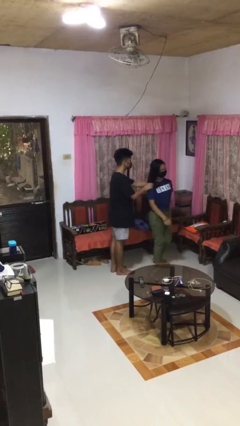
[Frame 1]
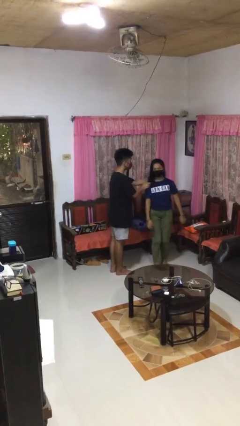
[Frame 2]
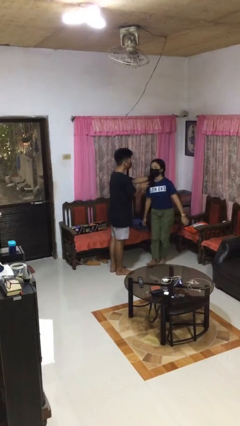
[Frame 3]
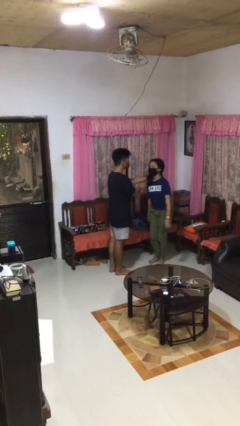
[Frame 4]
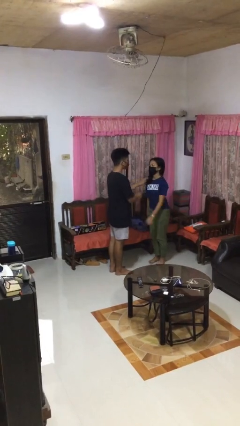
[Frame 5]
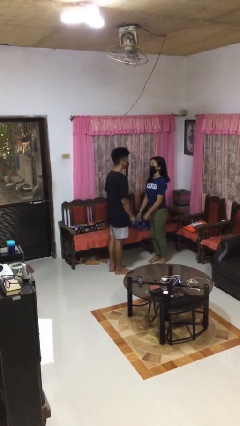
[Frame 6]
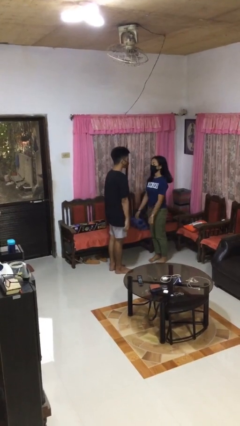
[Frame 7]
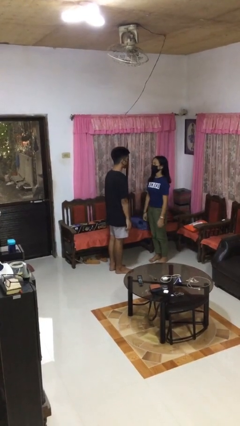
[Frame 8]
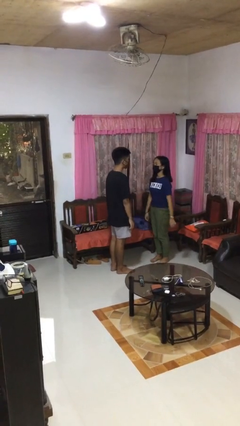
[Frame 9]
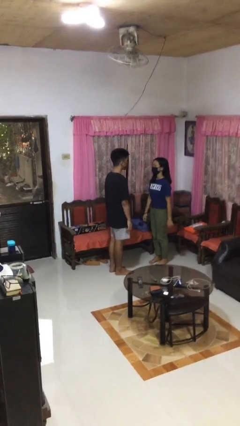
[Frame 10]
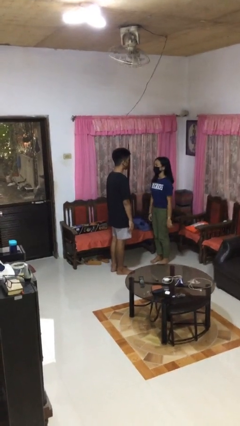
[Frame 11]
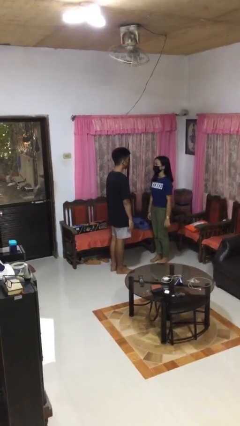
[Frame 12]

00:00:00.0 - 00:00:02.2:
person spins person around

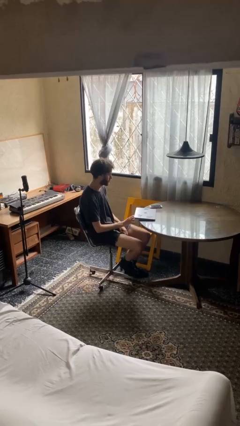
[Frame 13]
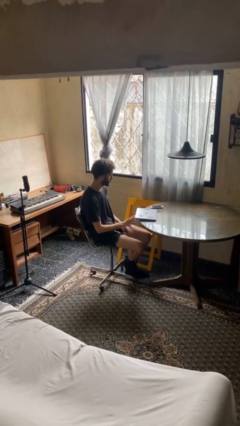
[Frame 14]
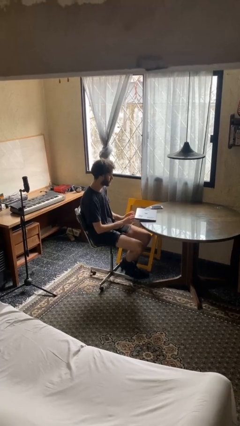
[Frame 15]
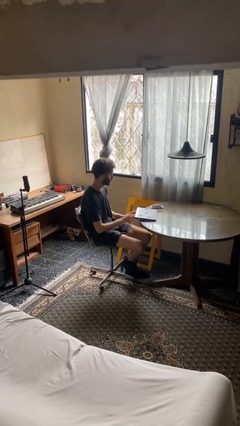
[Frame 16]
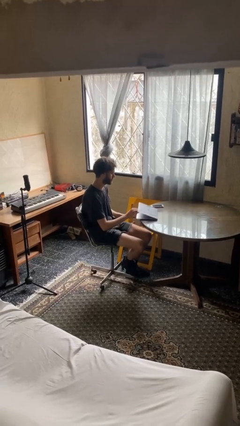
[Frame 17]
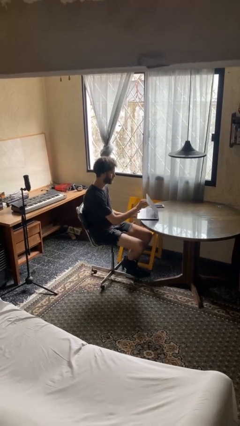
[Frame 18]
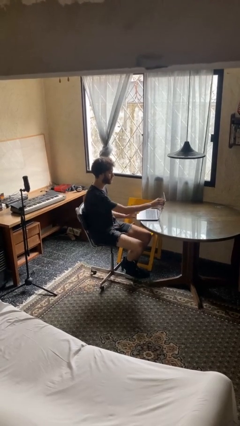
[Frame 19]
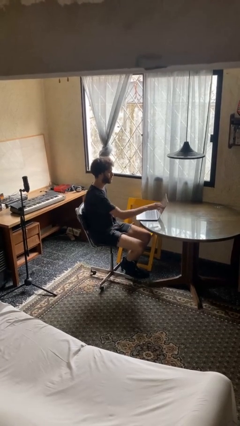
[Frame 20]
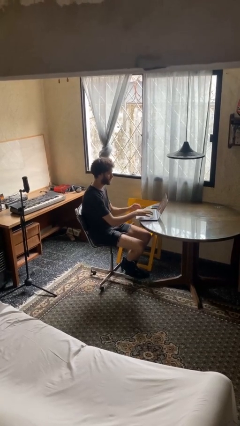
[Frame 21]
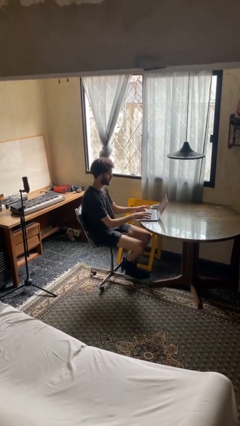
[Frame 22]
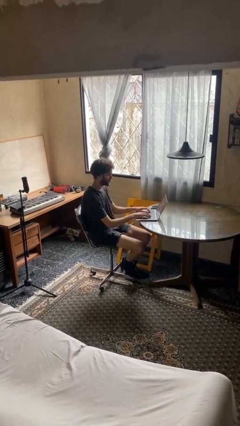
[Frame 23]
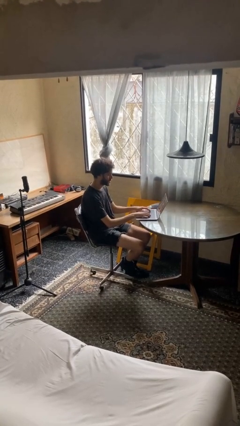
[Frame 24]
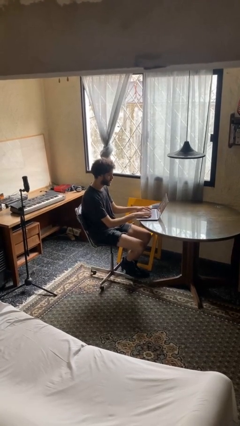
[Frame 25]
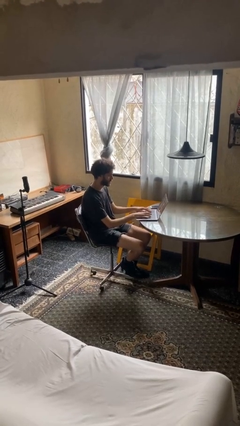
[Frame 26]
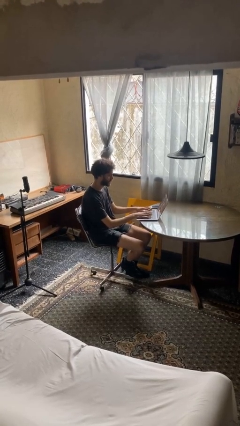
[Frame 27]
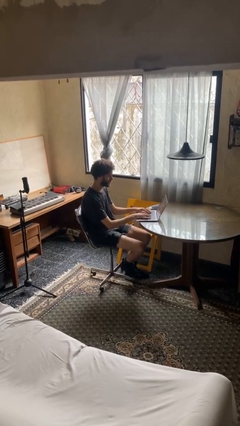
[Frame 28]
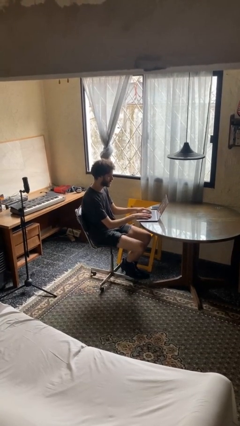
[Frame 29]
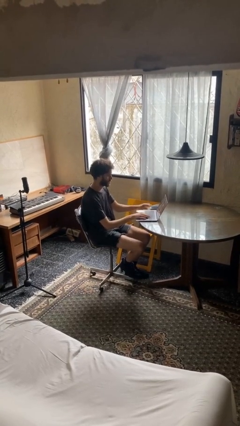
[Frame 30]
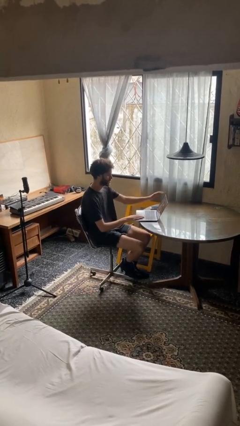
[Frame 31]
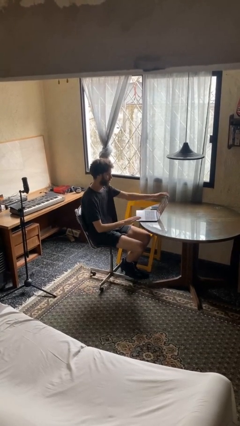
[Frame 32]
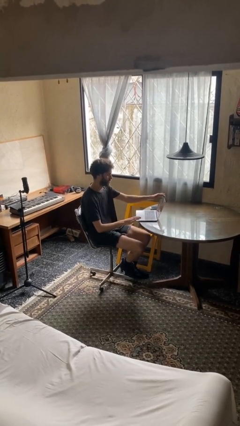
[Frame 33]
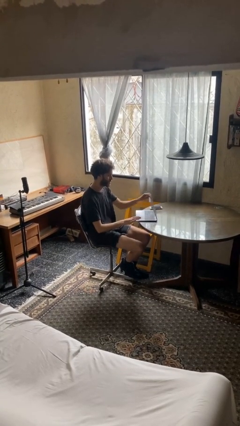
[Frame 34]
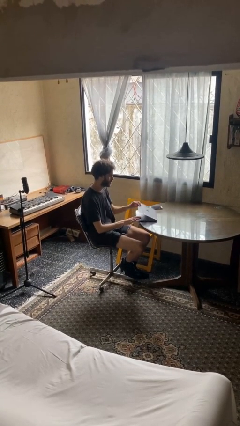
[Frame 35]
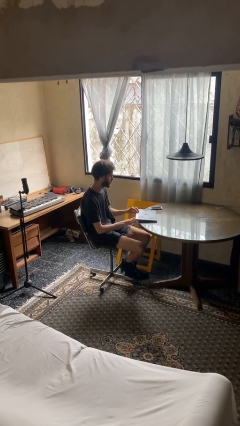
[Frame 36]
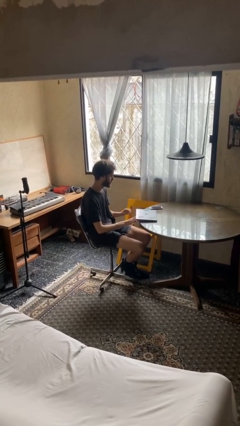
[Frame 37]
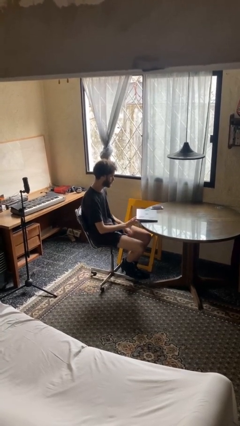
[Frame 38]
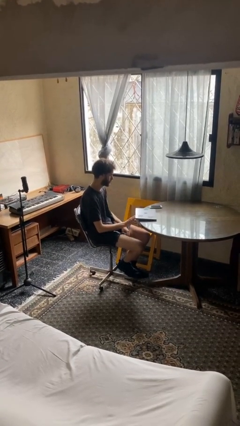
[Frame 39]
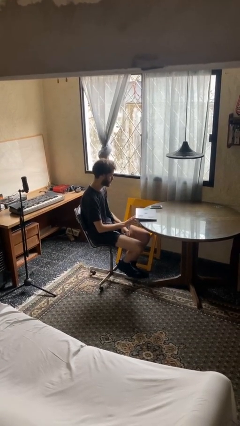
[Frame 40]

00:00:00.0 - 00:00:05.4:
person interacts with laptop

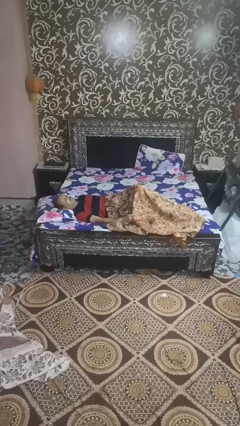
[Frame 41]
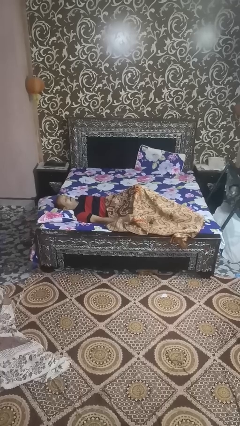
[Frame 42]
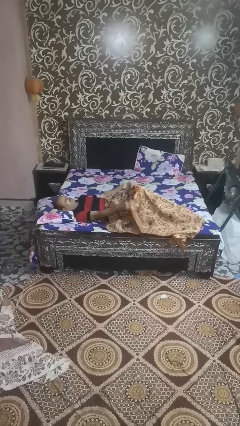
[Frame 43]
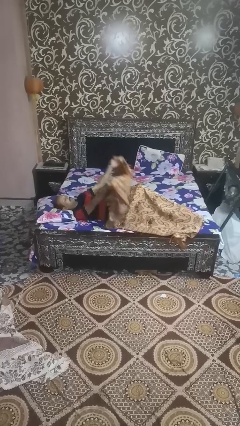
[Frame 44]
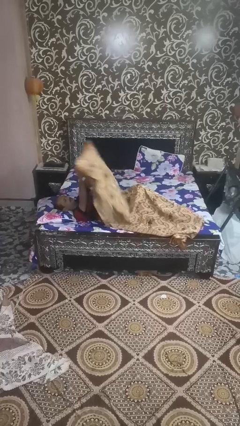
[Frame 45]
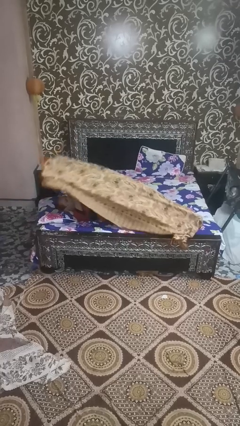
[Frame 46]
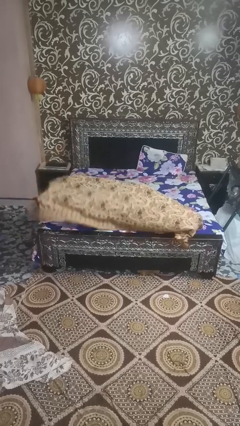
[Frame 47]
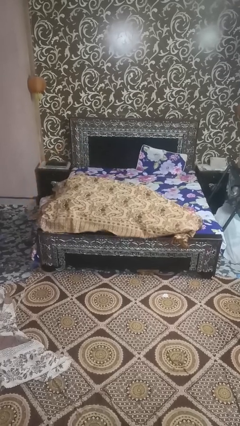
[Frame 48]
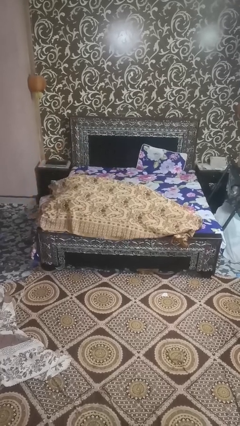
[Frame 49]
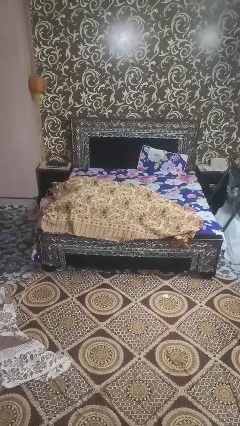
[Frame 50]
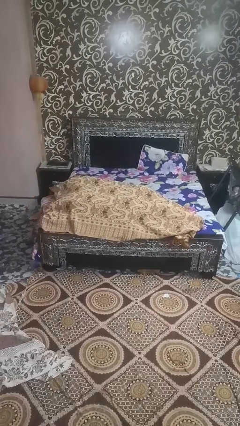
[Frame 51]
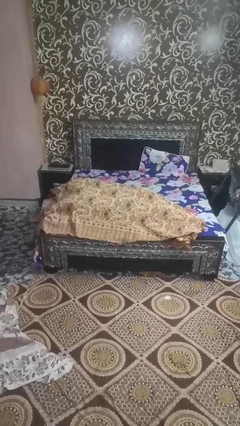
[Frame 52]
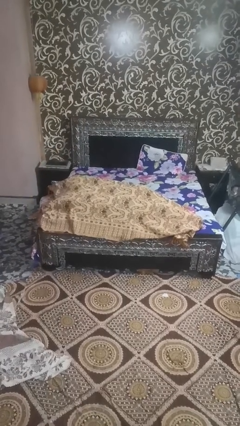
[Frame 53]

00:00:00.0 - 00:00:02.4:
person covers with blanket

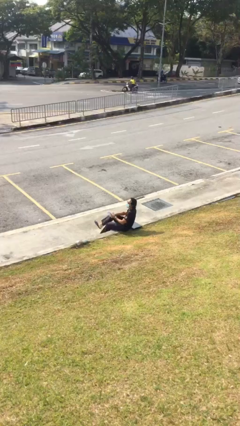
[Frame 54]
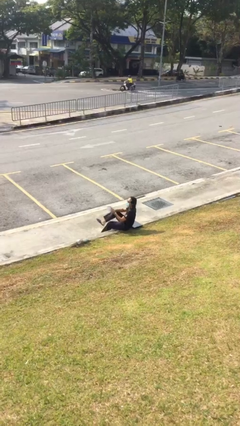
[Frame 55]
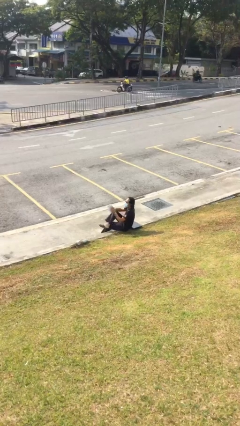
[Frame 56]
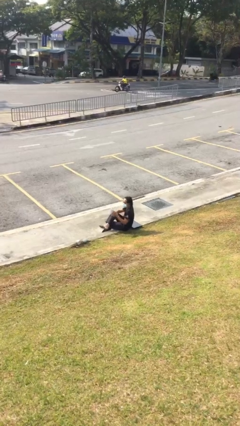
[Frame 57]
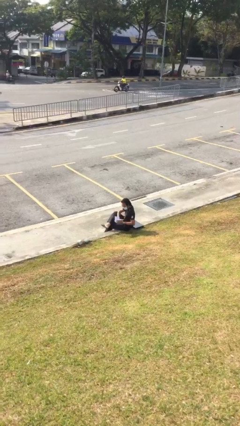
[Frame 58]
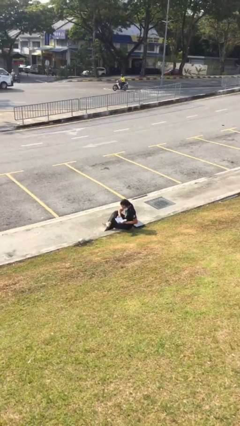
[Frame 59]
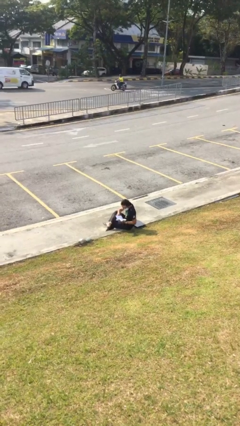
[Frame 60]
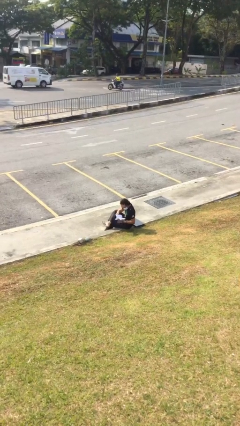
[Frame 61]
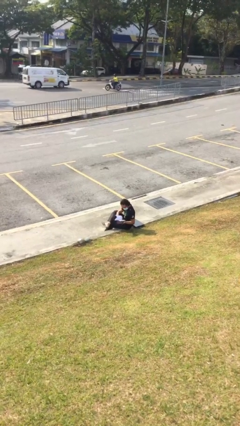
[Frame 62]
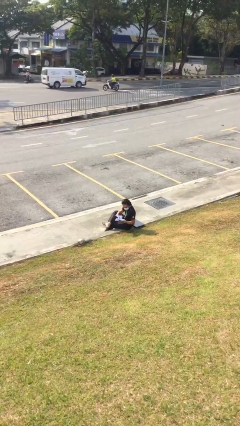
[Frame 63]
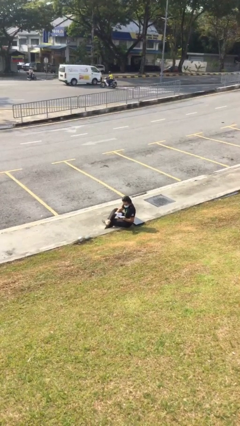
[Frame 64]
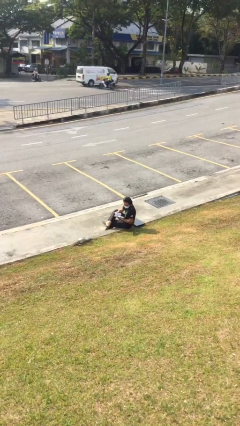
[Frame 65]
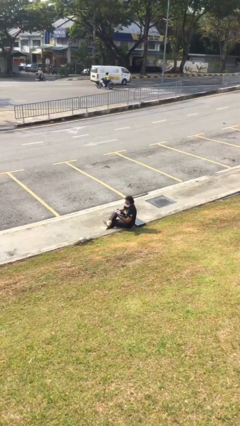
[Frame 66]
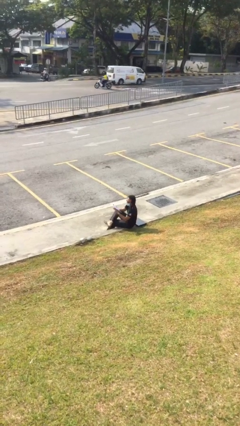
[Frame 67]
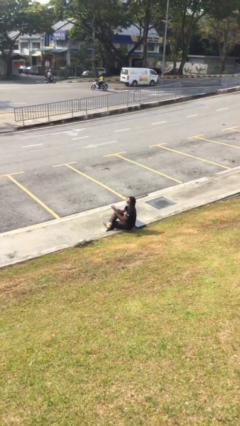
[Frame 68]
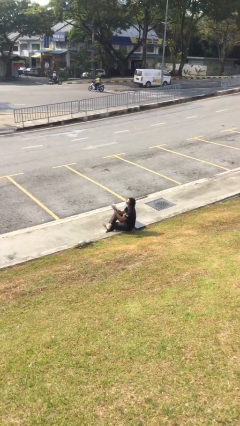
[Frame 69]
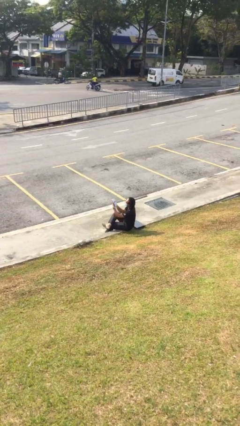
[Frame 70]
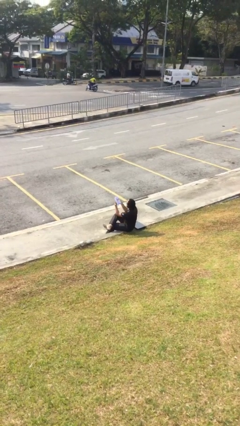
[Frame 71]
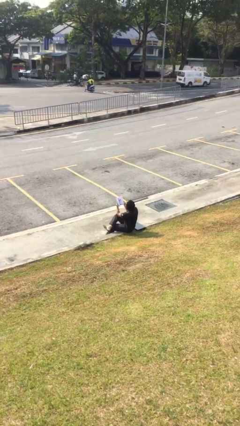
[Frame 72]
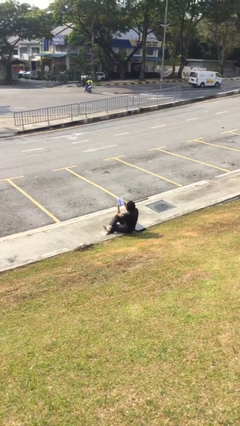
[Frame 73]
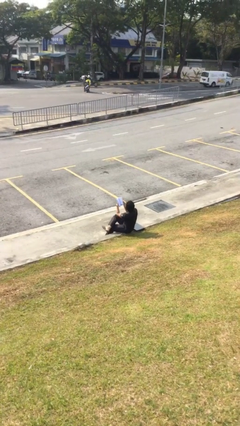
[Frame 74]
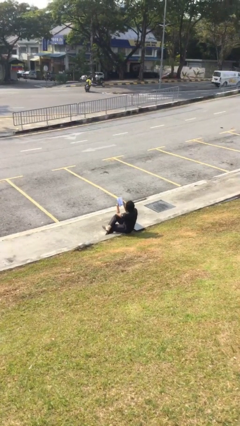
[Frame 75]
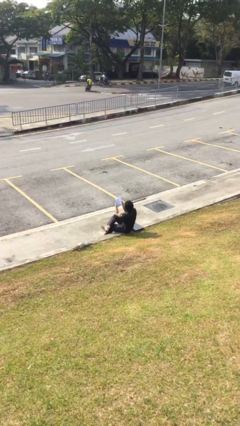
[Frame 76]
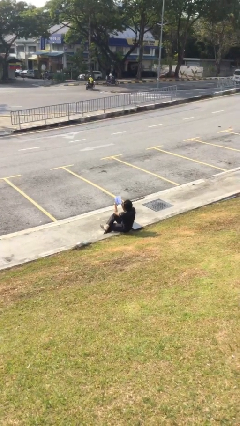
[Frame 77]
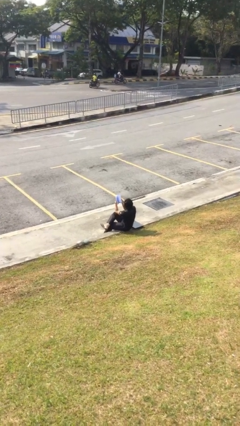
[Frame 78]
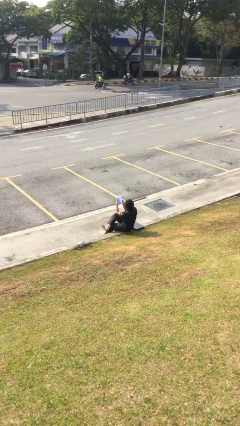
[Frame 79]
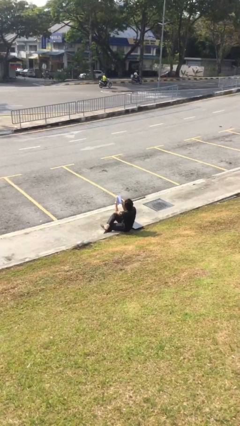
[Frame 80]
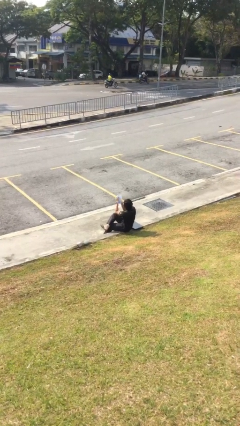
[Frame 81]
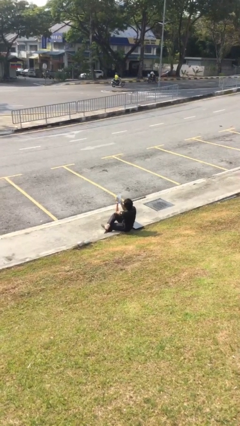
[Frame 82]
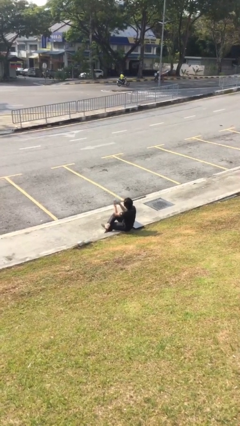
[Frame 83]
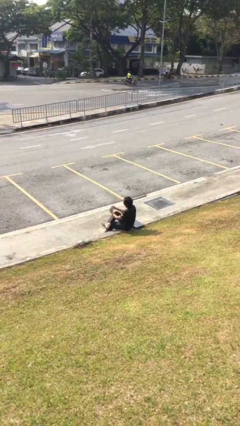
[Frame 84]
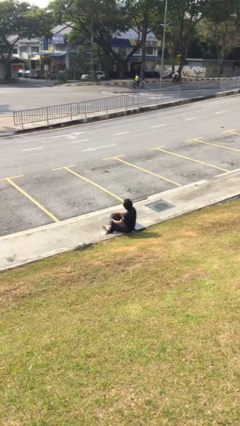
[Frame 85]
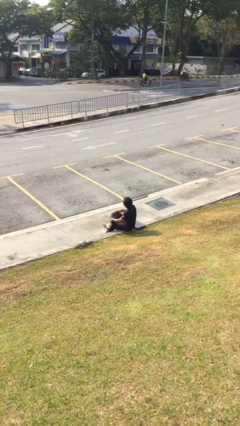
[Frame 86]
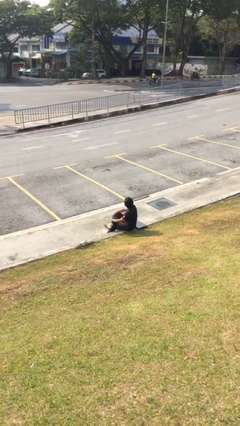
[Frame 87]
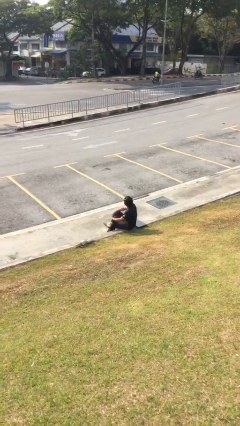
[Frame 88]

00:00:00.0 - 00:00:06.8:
person reads document

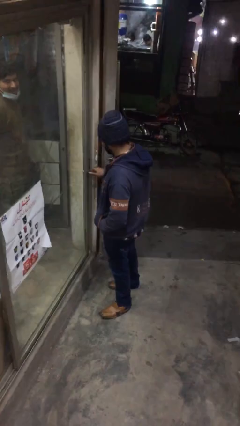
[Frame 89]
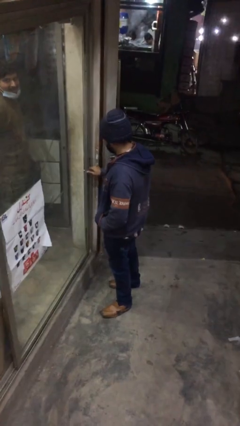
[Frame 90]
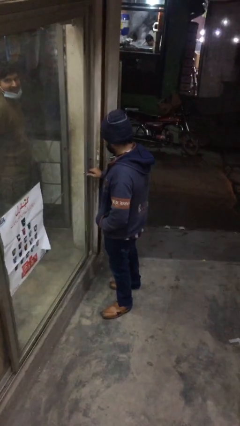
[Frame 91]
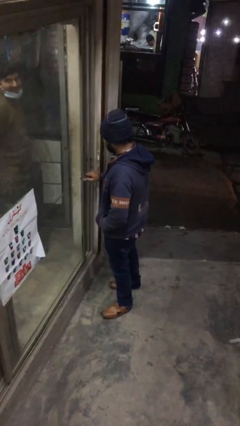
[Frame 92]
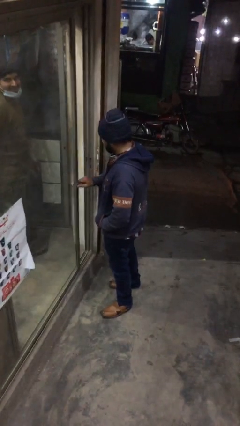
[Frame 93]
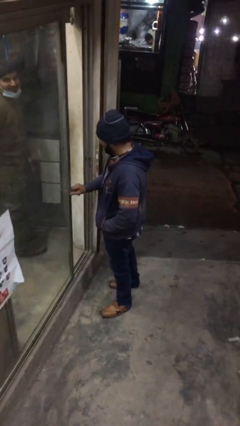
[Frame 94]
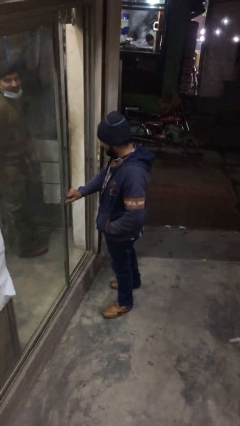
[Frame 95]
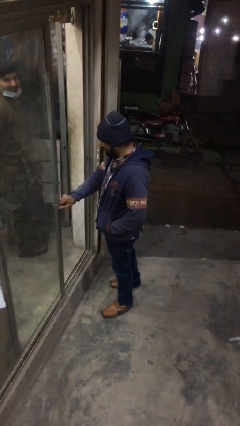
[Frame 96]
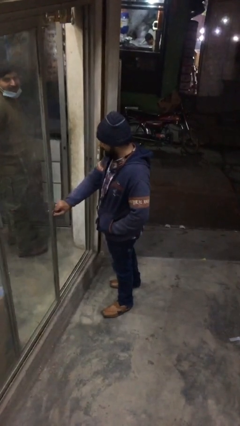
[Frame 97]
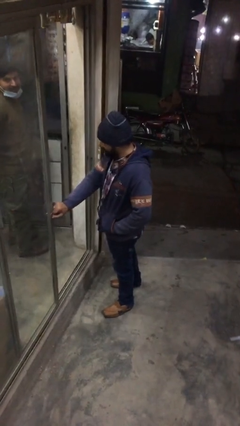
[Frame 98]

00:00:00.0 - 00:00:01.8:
person opens facility door
